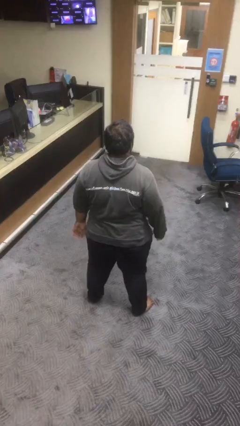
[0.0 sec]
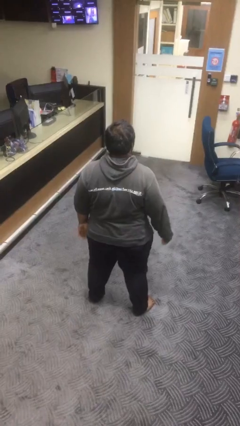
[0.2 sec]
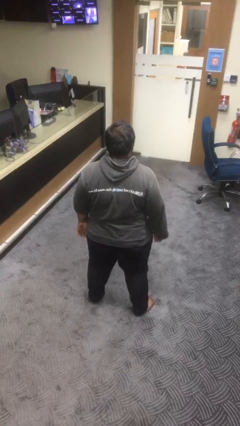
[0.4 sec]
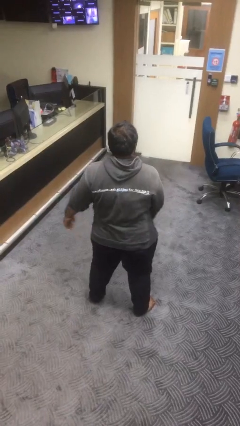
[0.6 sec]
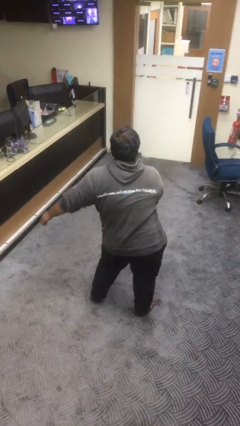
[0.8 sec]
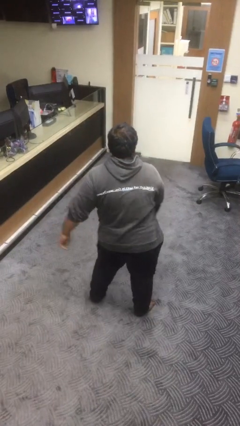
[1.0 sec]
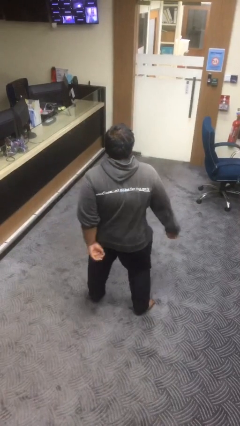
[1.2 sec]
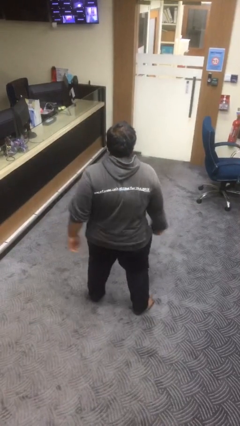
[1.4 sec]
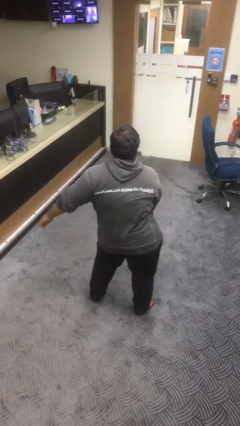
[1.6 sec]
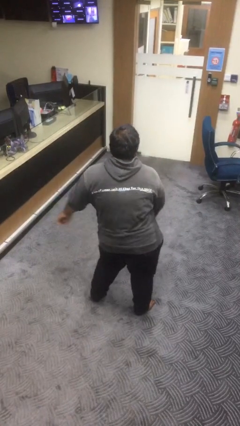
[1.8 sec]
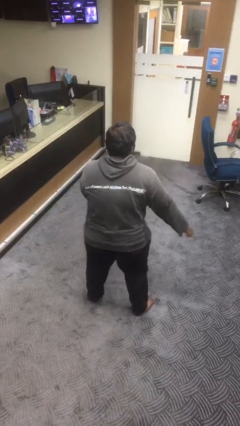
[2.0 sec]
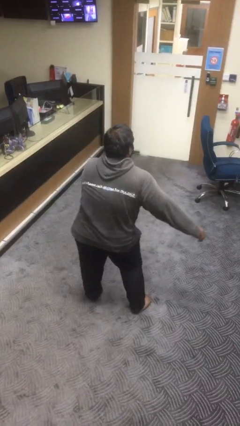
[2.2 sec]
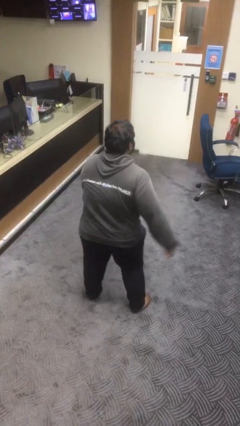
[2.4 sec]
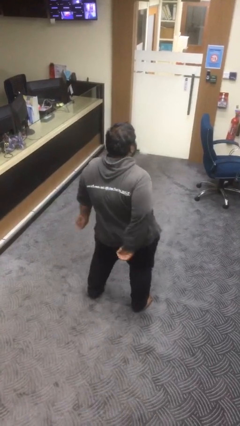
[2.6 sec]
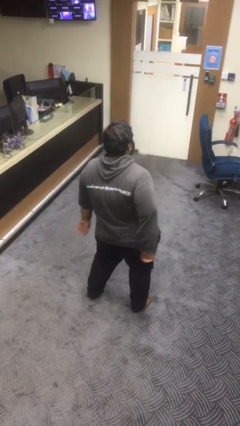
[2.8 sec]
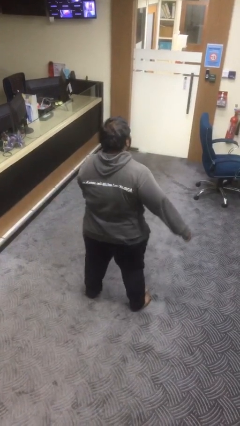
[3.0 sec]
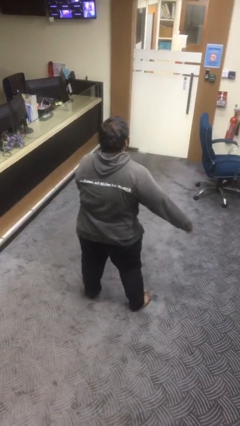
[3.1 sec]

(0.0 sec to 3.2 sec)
person dances in place

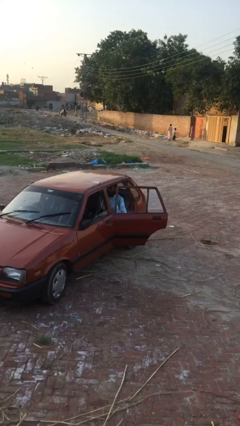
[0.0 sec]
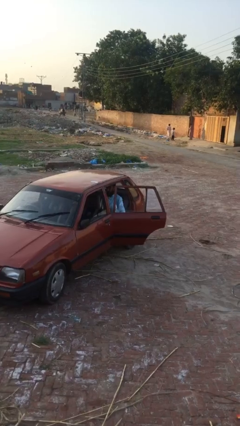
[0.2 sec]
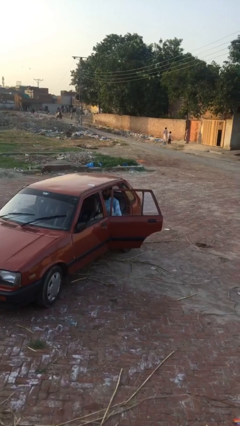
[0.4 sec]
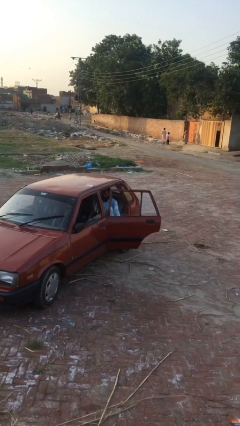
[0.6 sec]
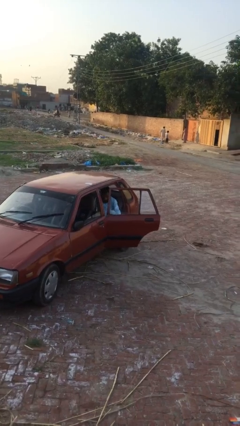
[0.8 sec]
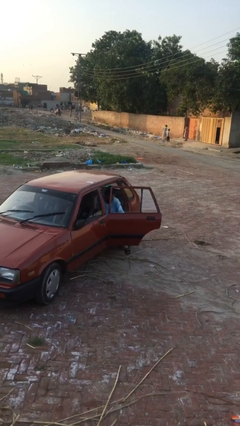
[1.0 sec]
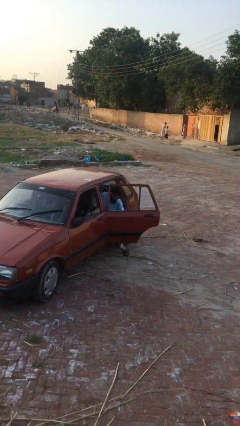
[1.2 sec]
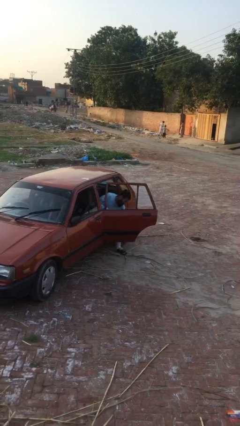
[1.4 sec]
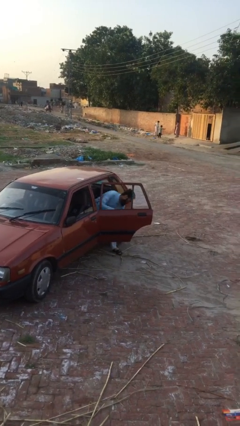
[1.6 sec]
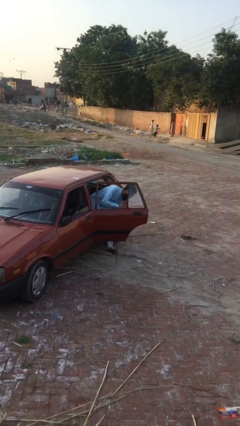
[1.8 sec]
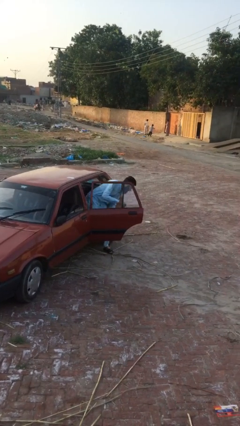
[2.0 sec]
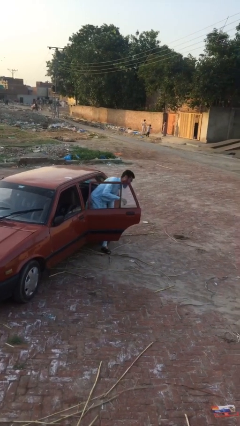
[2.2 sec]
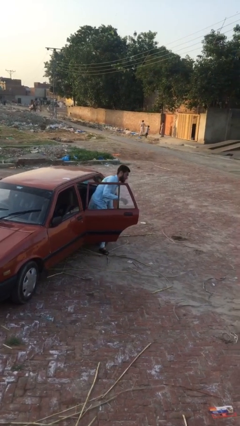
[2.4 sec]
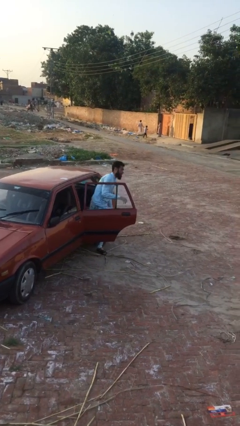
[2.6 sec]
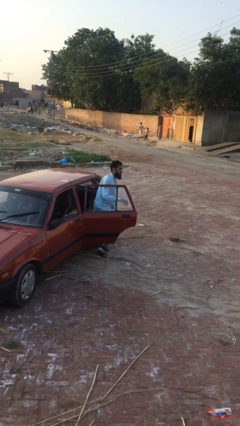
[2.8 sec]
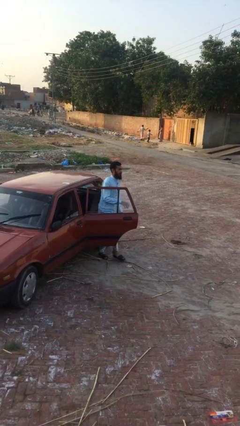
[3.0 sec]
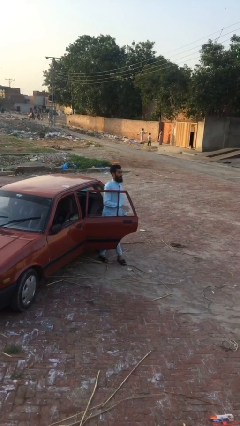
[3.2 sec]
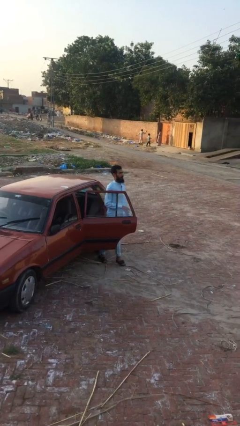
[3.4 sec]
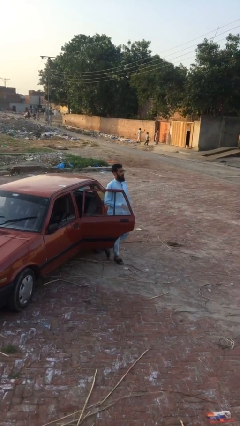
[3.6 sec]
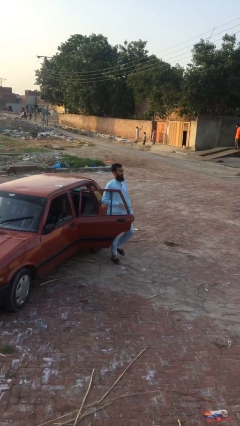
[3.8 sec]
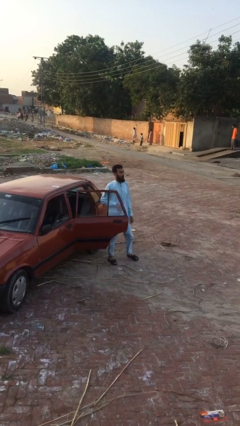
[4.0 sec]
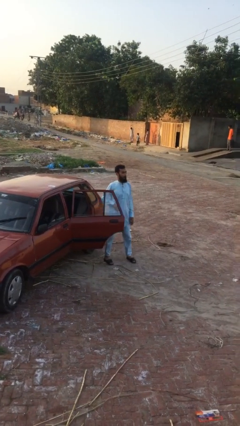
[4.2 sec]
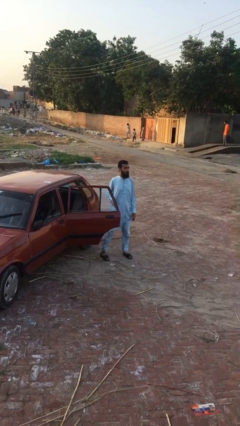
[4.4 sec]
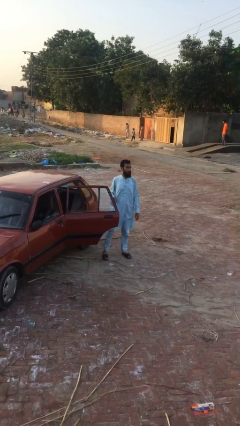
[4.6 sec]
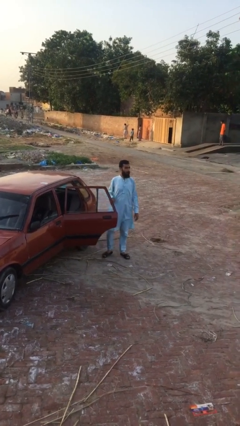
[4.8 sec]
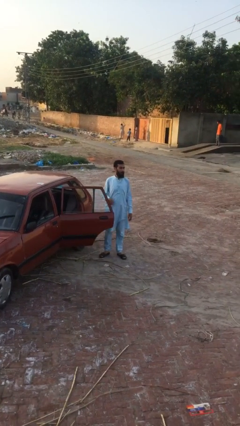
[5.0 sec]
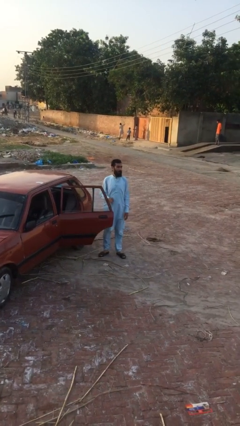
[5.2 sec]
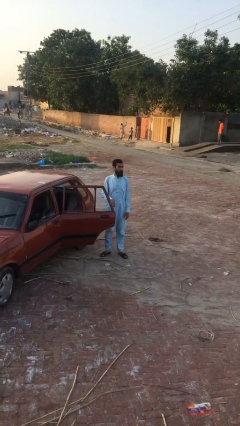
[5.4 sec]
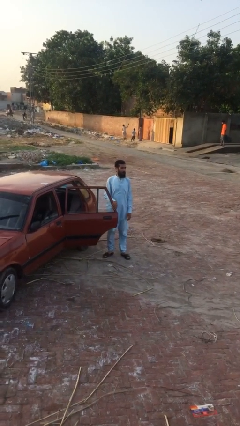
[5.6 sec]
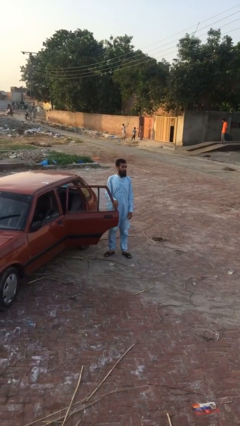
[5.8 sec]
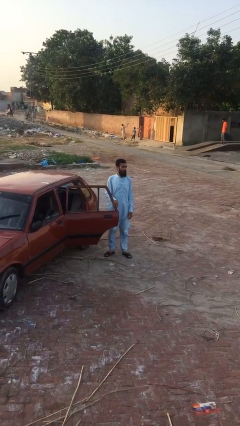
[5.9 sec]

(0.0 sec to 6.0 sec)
person exits car

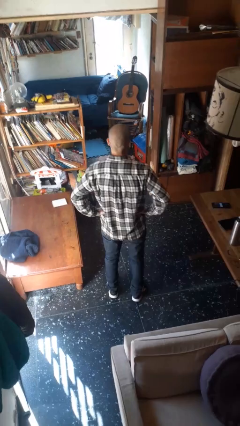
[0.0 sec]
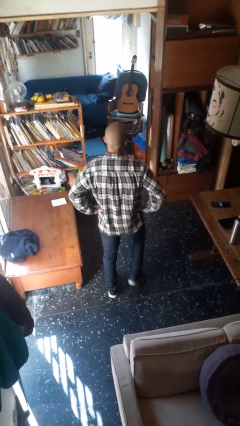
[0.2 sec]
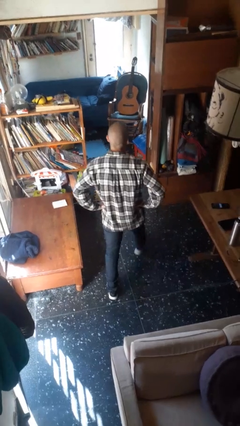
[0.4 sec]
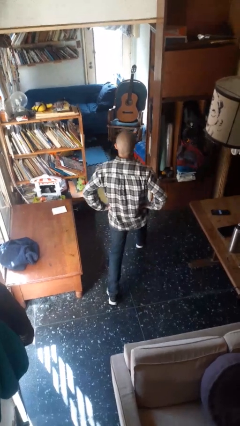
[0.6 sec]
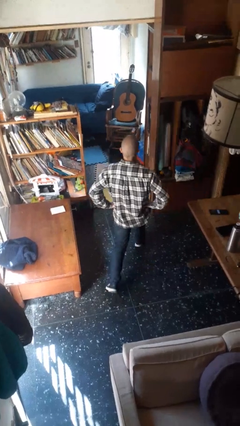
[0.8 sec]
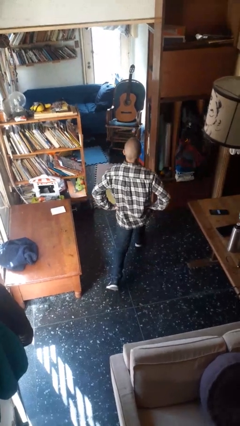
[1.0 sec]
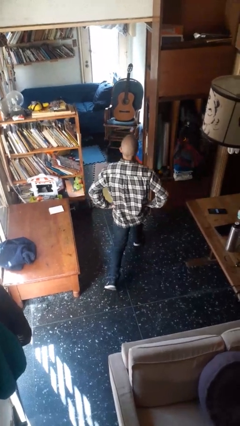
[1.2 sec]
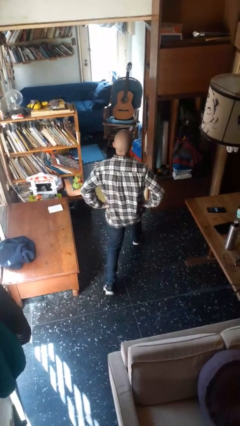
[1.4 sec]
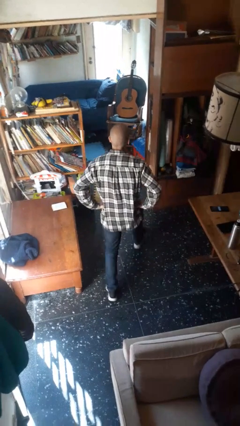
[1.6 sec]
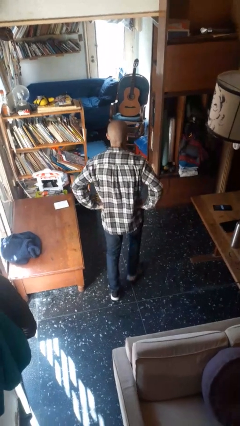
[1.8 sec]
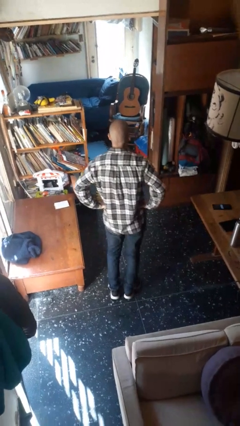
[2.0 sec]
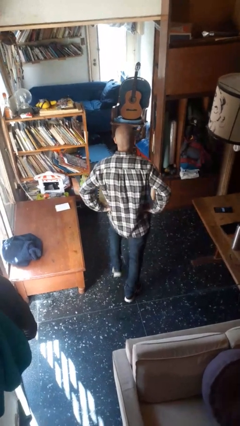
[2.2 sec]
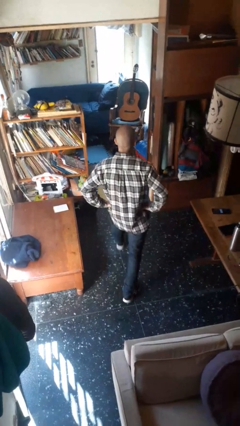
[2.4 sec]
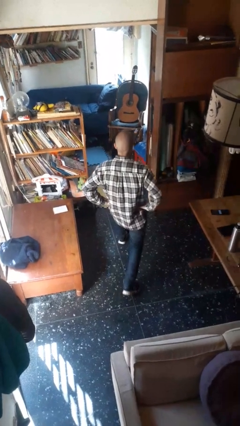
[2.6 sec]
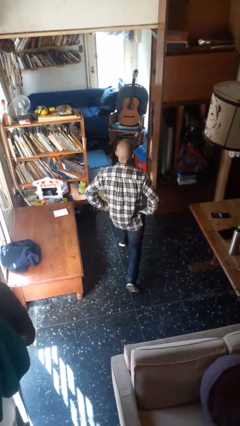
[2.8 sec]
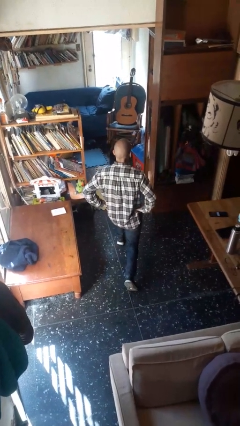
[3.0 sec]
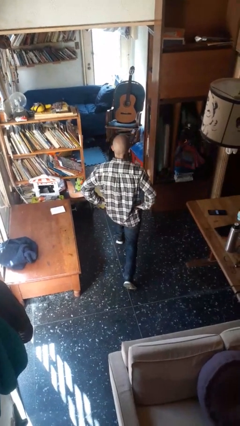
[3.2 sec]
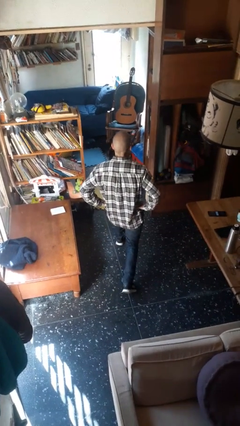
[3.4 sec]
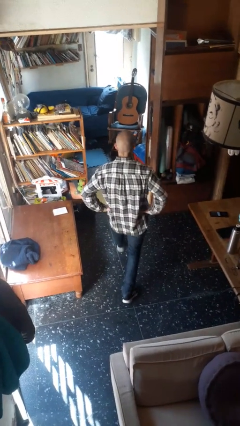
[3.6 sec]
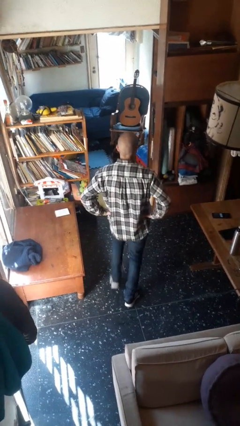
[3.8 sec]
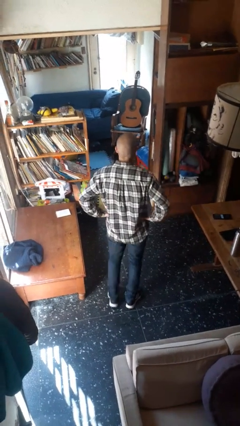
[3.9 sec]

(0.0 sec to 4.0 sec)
person exercises with lunges

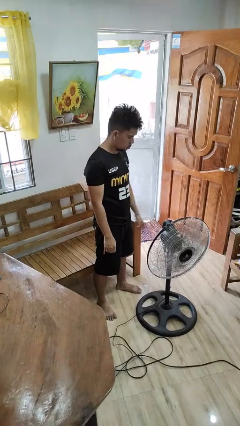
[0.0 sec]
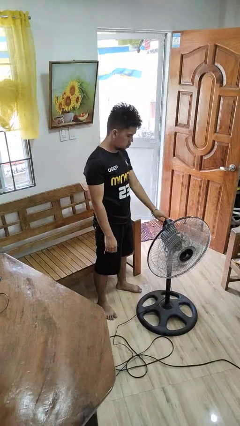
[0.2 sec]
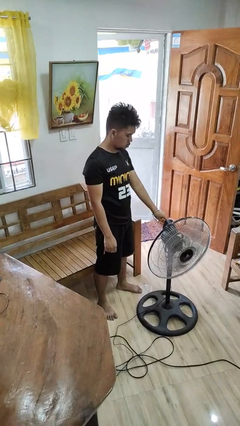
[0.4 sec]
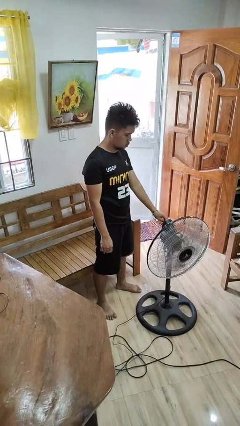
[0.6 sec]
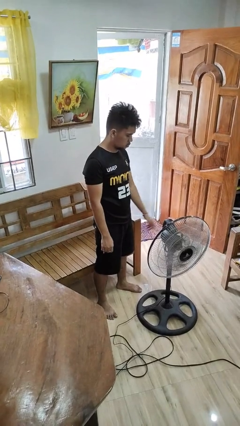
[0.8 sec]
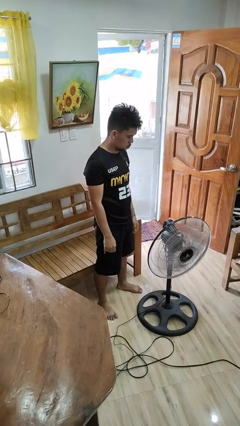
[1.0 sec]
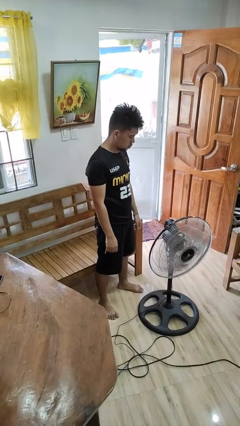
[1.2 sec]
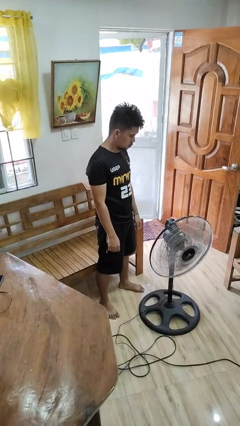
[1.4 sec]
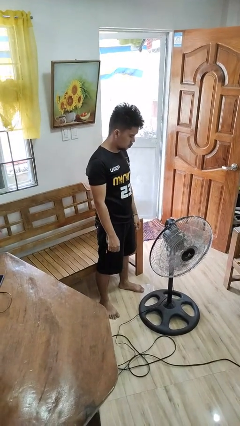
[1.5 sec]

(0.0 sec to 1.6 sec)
person turns off fan

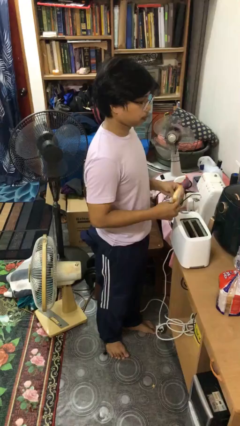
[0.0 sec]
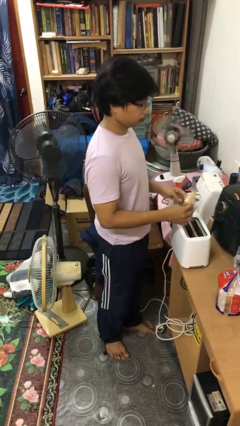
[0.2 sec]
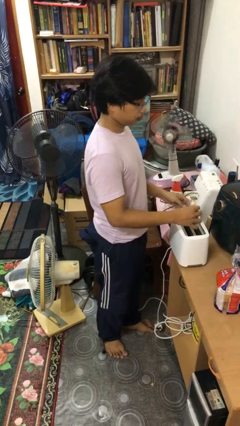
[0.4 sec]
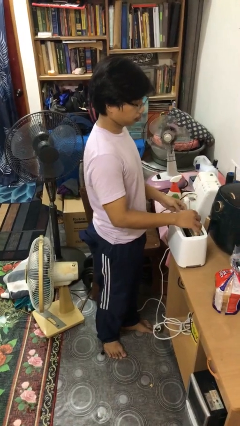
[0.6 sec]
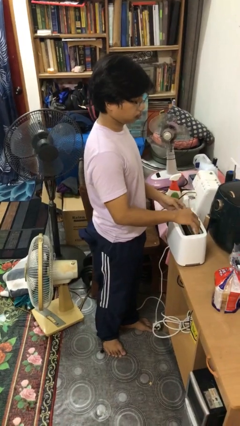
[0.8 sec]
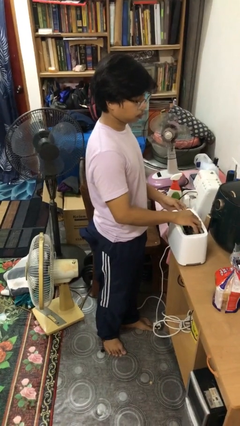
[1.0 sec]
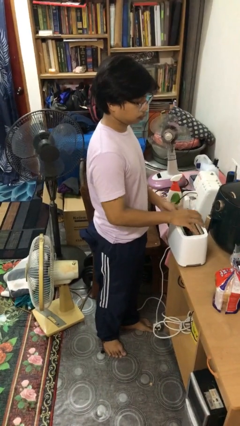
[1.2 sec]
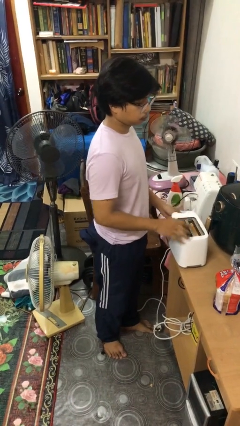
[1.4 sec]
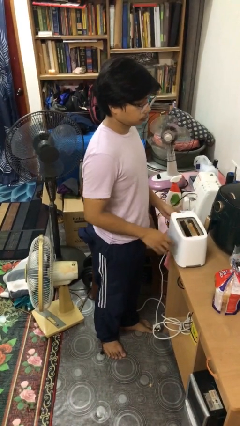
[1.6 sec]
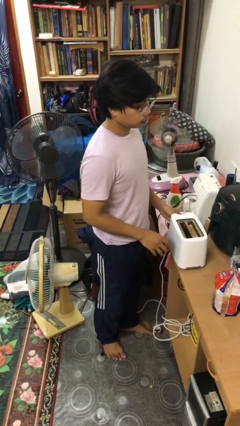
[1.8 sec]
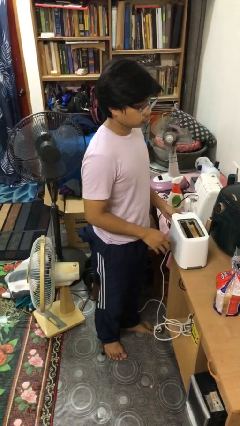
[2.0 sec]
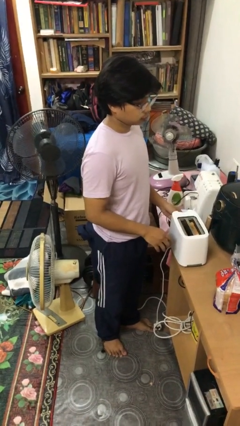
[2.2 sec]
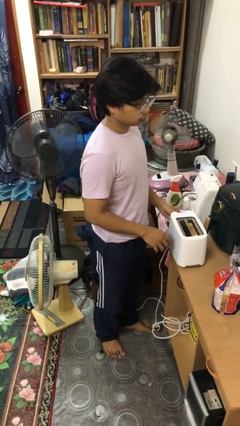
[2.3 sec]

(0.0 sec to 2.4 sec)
person puts object into toaster

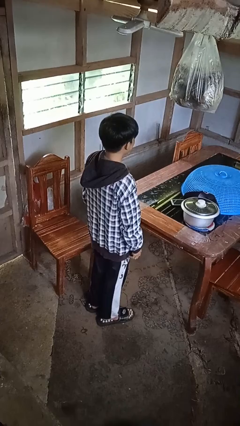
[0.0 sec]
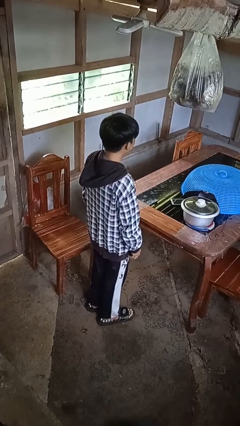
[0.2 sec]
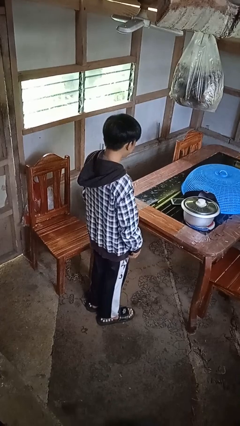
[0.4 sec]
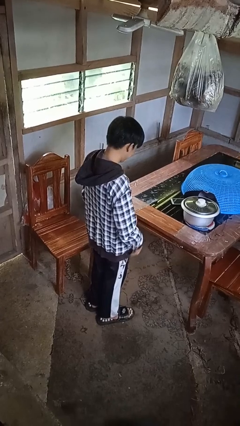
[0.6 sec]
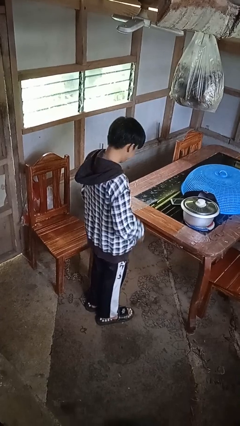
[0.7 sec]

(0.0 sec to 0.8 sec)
person unzips jacket
